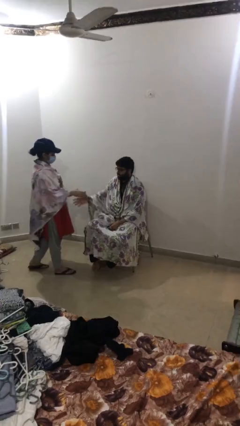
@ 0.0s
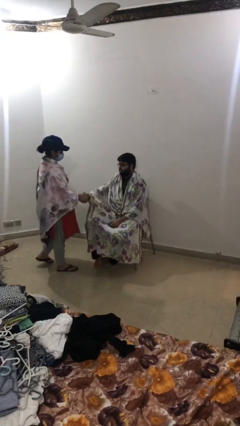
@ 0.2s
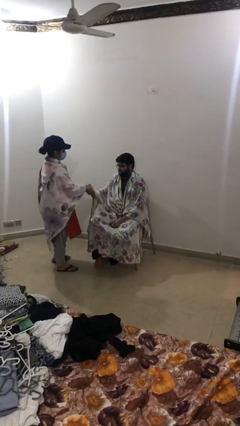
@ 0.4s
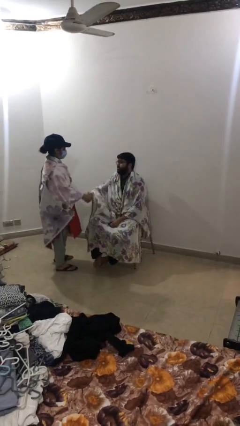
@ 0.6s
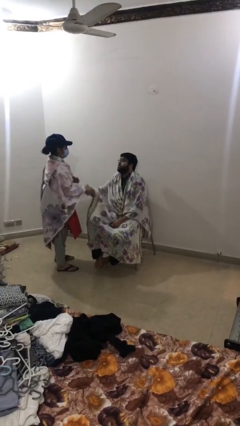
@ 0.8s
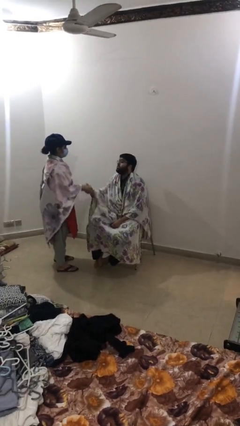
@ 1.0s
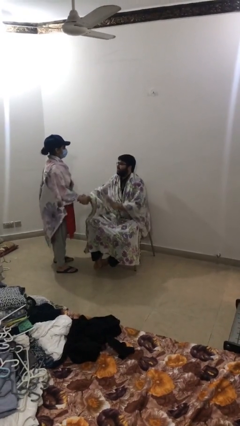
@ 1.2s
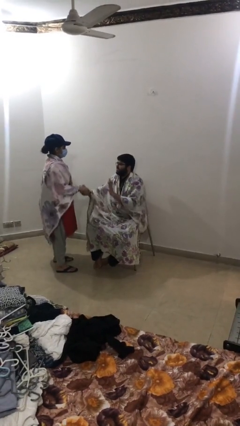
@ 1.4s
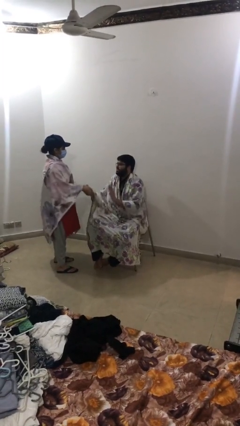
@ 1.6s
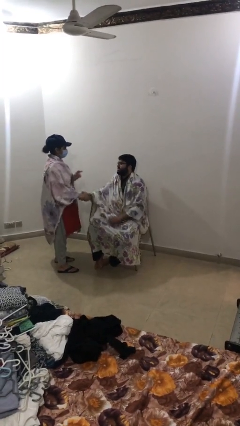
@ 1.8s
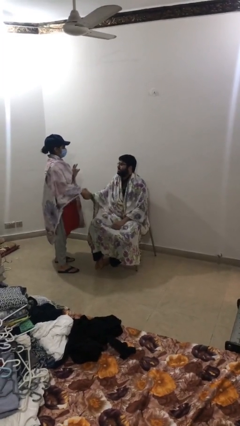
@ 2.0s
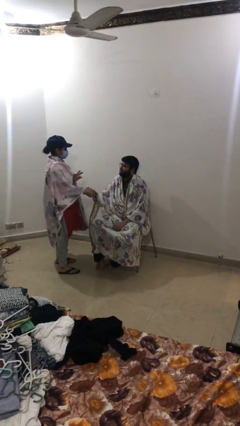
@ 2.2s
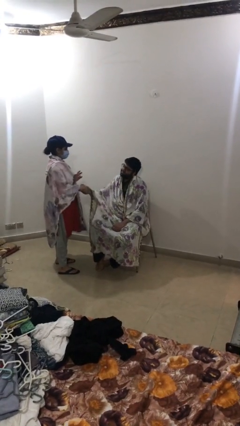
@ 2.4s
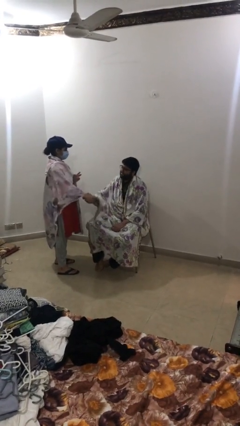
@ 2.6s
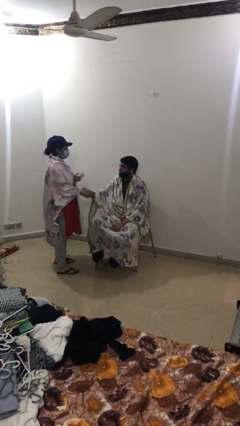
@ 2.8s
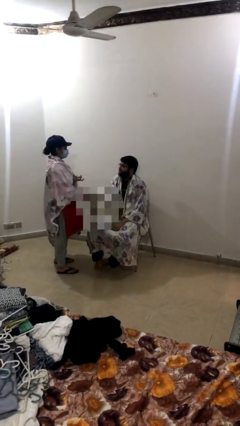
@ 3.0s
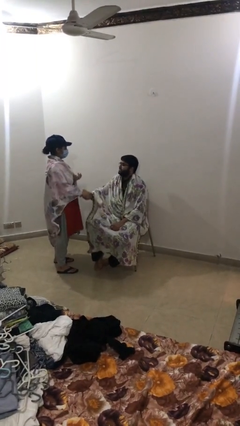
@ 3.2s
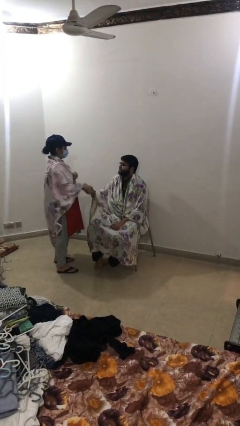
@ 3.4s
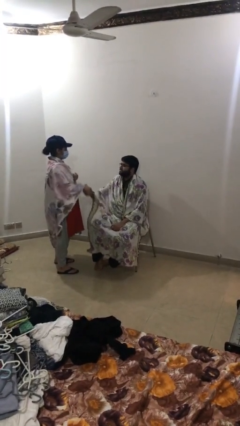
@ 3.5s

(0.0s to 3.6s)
person shakes hand

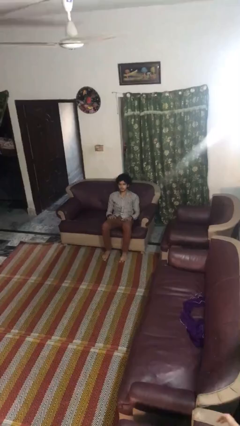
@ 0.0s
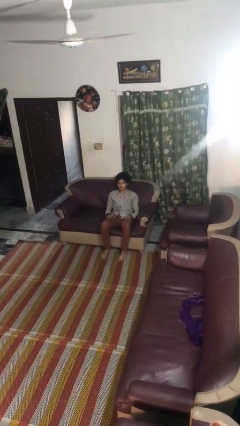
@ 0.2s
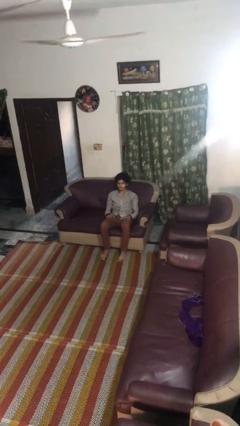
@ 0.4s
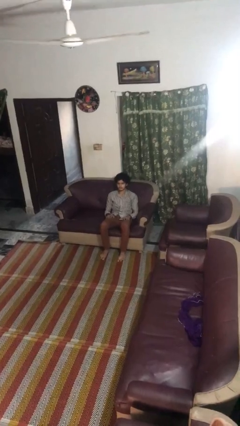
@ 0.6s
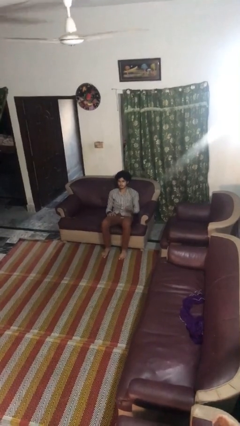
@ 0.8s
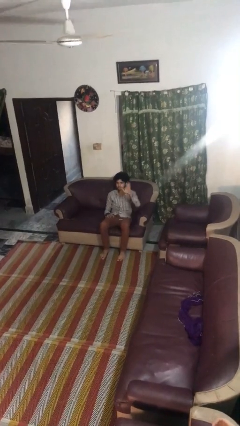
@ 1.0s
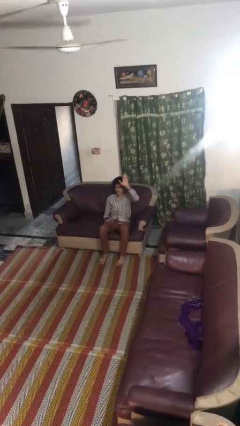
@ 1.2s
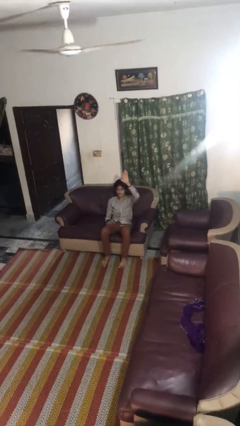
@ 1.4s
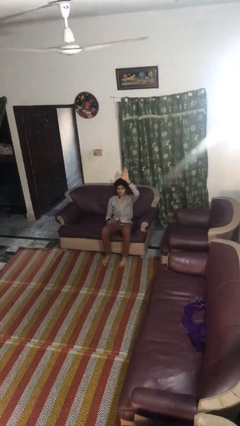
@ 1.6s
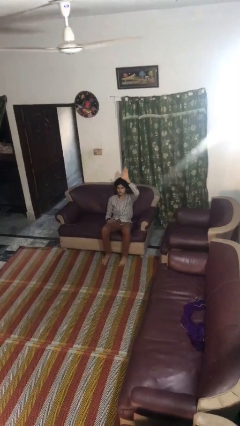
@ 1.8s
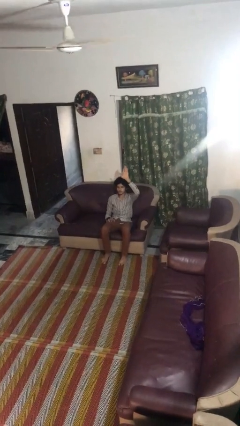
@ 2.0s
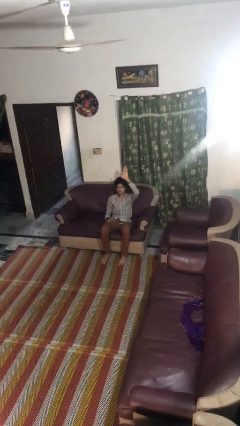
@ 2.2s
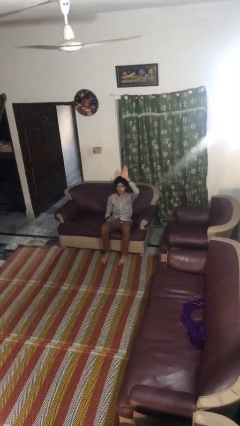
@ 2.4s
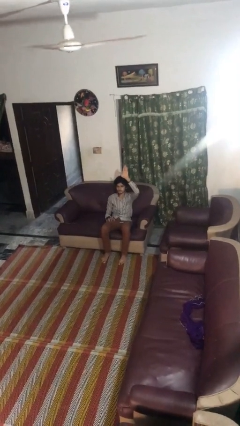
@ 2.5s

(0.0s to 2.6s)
person gestures raise hand

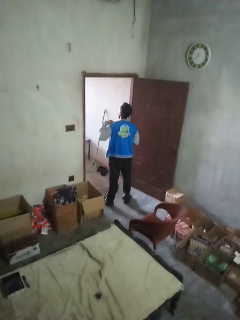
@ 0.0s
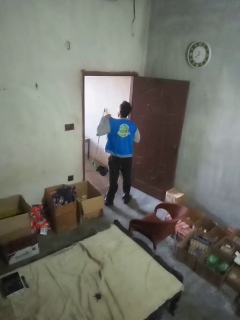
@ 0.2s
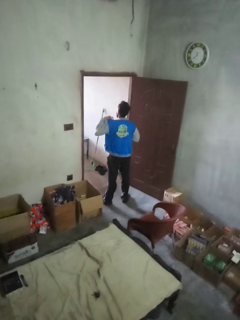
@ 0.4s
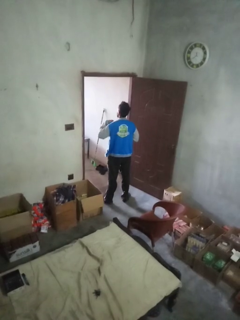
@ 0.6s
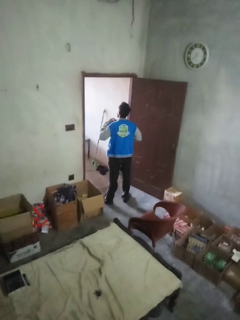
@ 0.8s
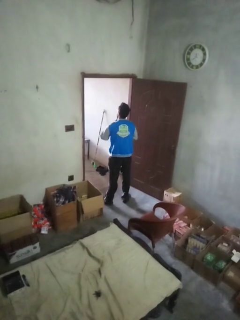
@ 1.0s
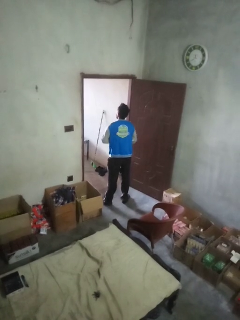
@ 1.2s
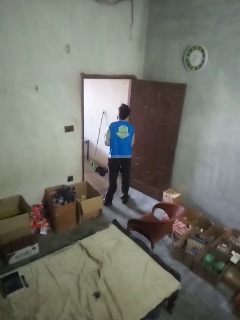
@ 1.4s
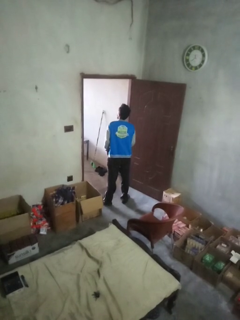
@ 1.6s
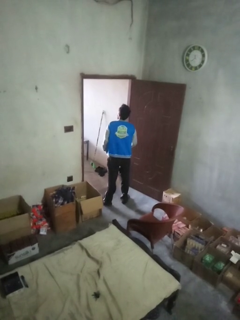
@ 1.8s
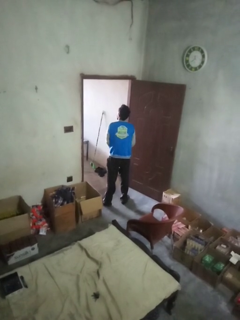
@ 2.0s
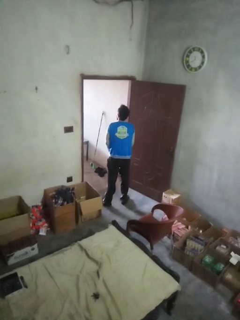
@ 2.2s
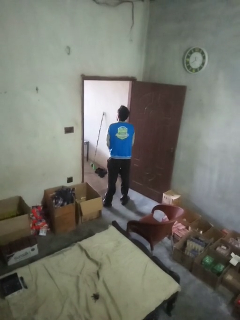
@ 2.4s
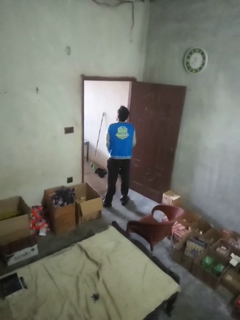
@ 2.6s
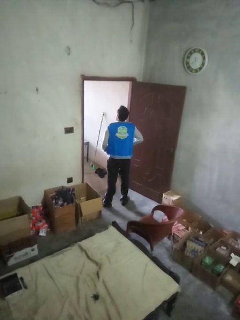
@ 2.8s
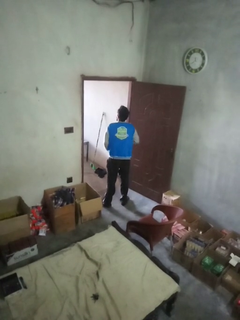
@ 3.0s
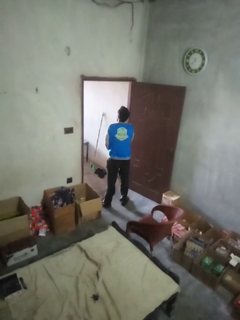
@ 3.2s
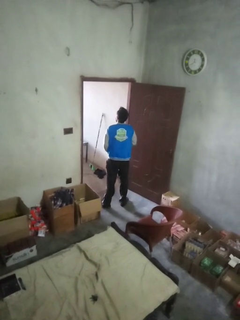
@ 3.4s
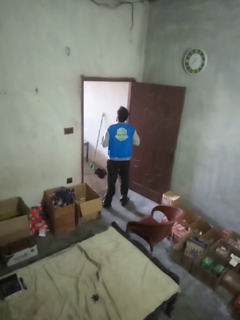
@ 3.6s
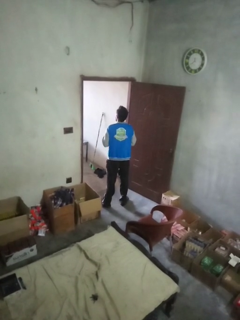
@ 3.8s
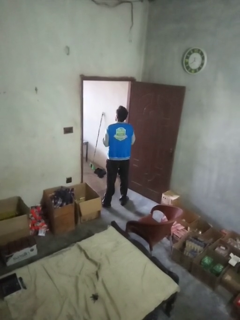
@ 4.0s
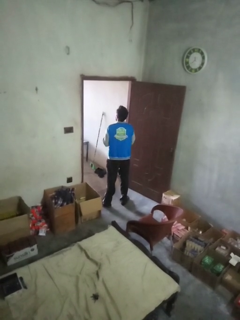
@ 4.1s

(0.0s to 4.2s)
person zips up jacket

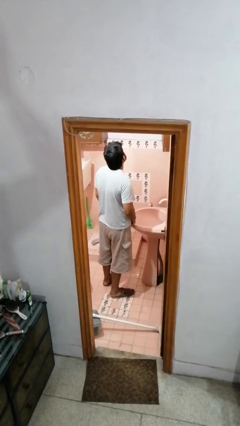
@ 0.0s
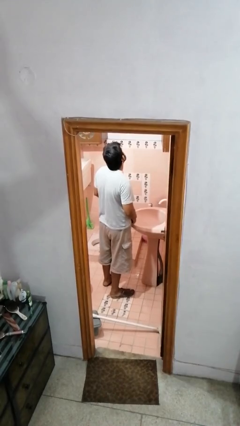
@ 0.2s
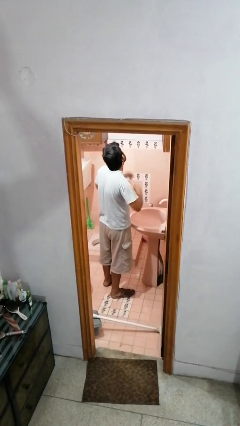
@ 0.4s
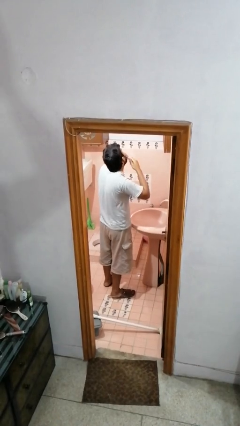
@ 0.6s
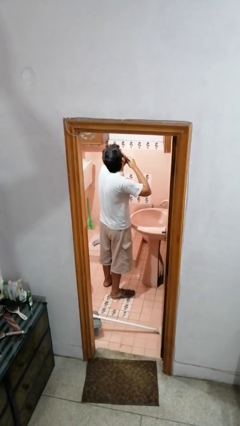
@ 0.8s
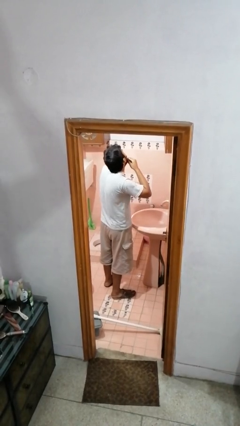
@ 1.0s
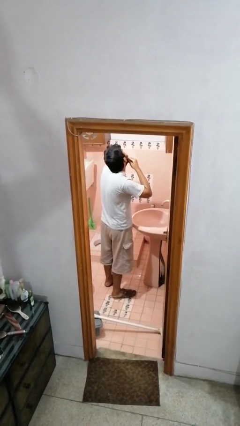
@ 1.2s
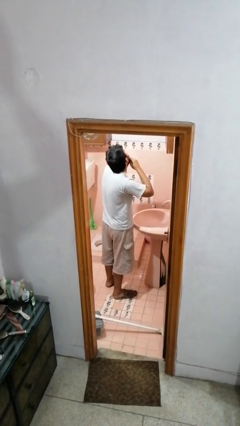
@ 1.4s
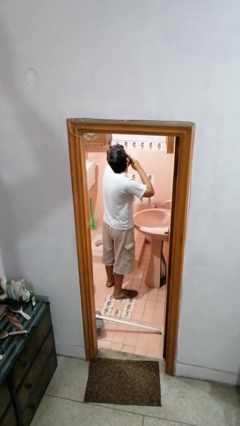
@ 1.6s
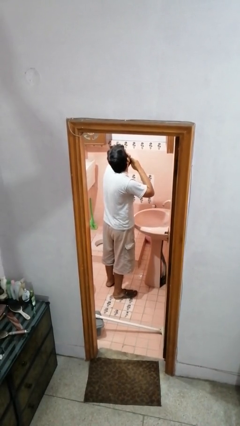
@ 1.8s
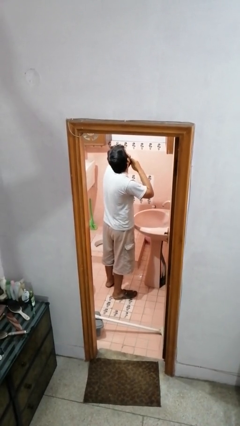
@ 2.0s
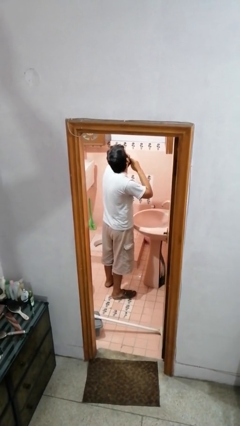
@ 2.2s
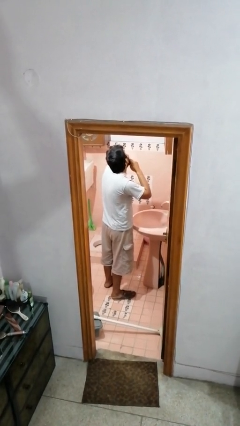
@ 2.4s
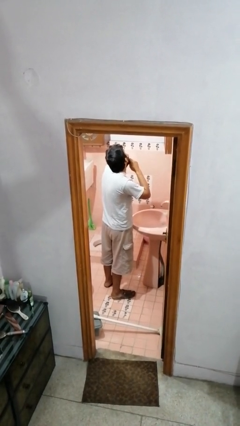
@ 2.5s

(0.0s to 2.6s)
person flosses

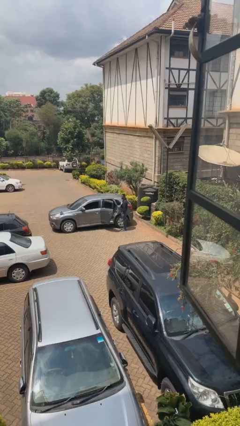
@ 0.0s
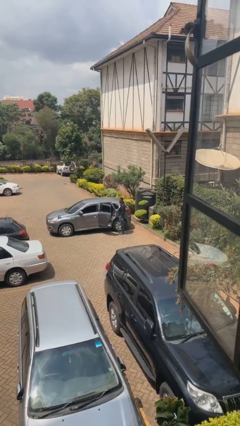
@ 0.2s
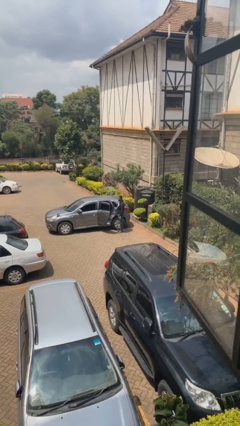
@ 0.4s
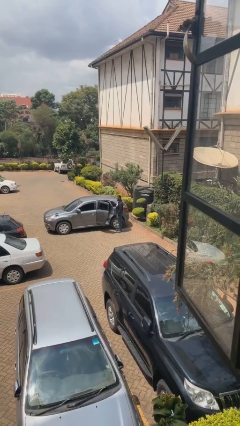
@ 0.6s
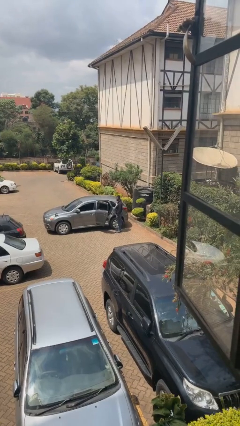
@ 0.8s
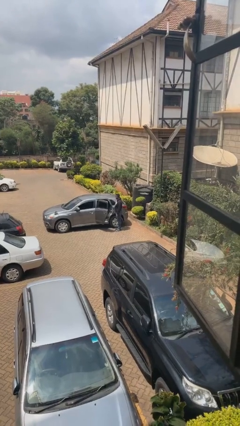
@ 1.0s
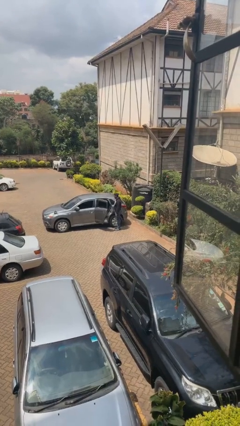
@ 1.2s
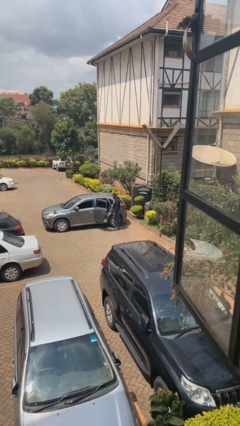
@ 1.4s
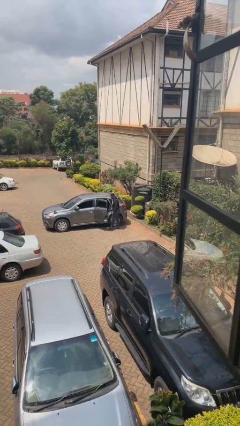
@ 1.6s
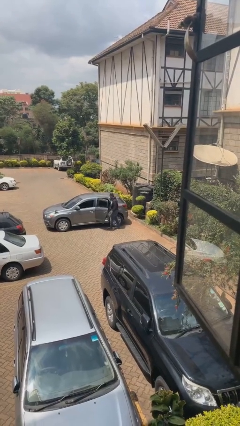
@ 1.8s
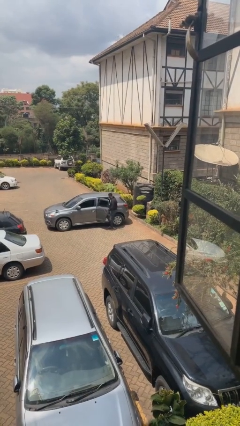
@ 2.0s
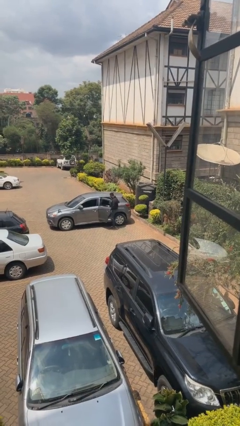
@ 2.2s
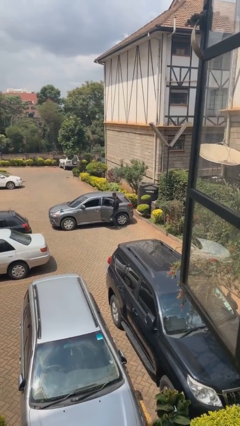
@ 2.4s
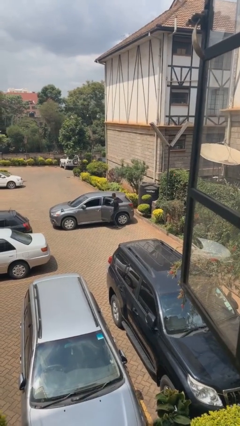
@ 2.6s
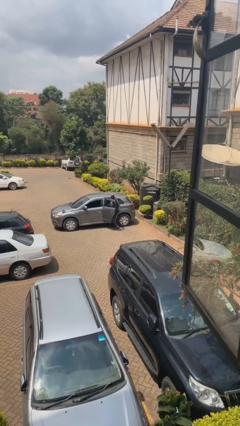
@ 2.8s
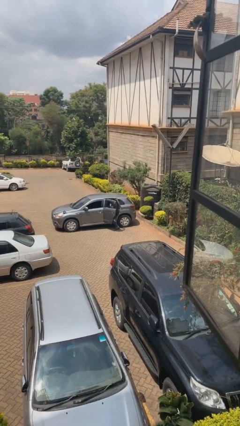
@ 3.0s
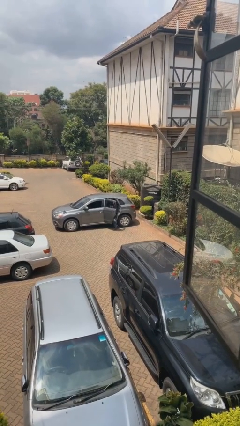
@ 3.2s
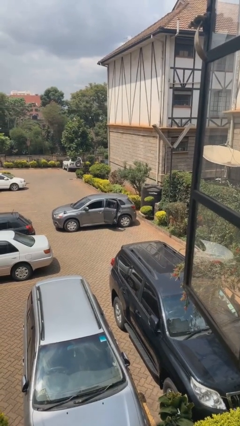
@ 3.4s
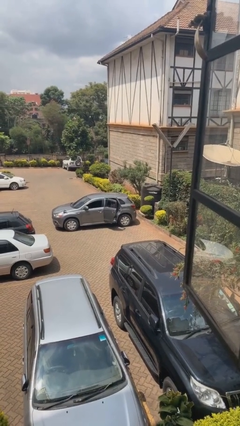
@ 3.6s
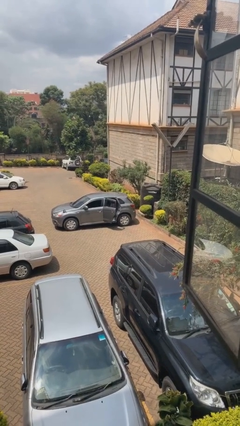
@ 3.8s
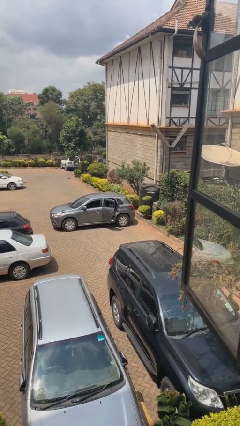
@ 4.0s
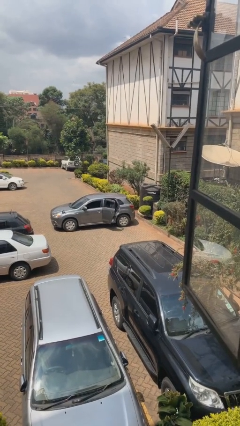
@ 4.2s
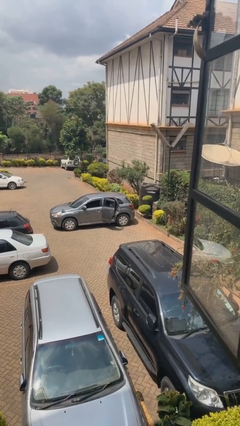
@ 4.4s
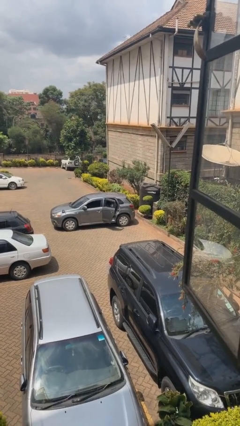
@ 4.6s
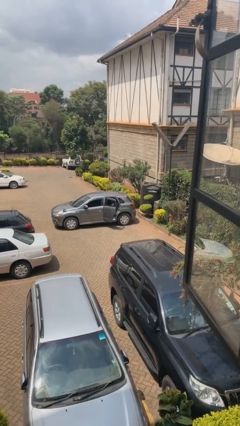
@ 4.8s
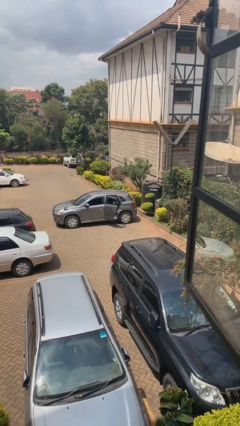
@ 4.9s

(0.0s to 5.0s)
person enters car

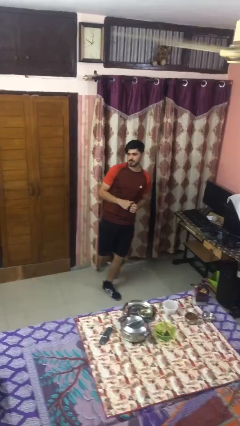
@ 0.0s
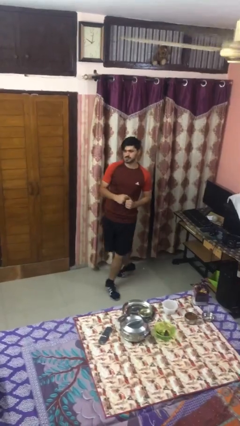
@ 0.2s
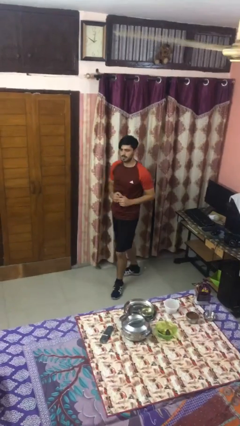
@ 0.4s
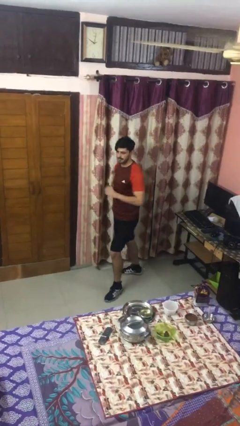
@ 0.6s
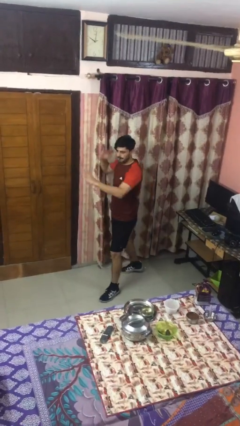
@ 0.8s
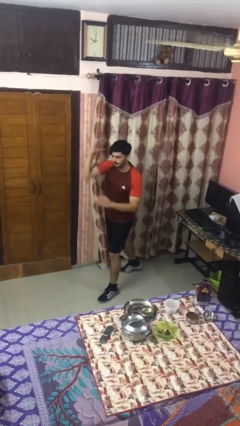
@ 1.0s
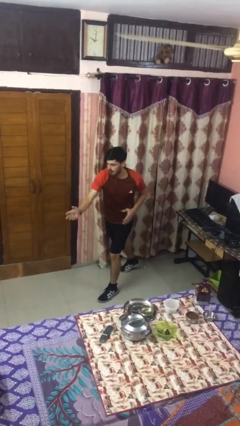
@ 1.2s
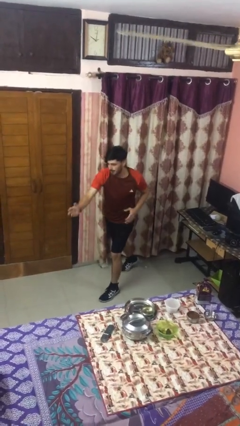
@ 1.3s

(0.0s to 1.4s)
person karate chop
